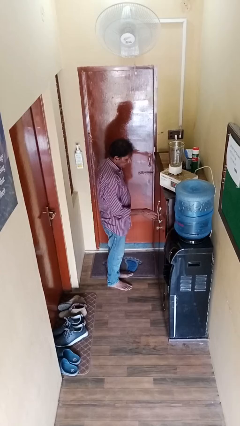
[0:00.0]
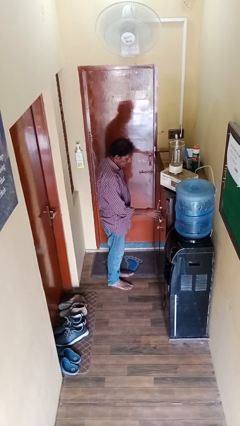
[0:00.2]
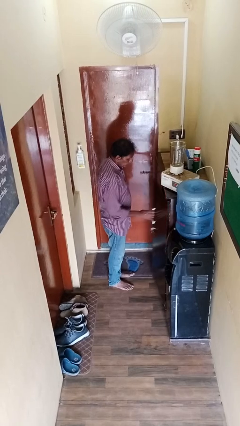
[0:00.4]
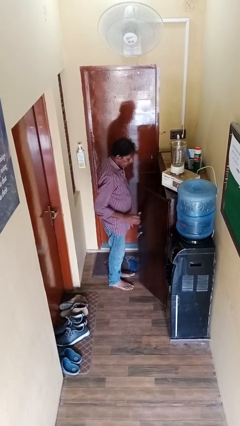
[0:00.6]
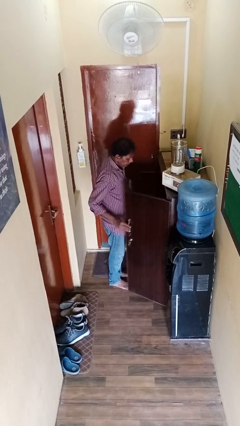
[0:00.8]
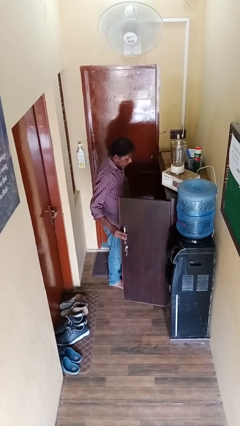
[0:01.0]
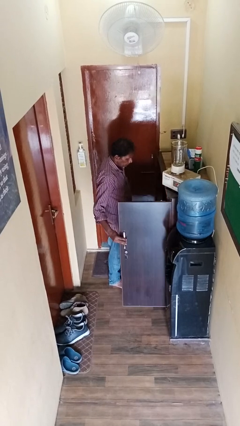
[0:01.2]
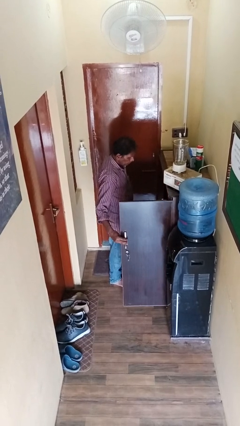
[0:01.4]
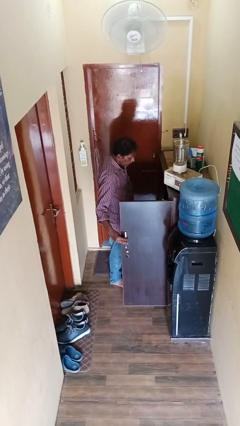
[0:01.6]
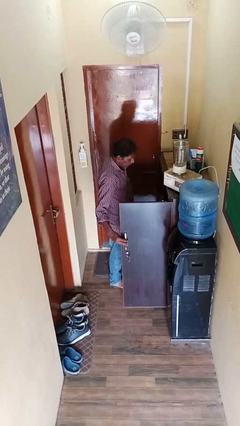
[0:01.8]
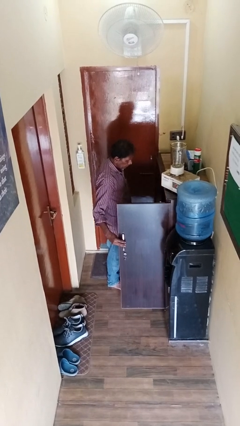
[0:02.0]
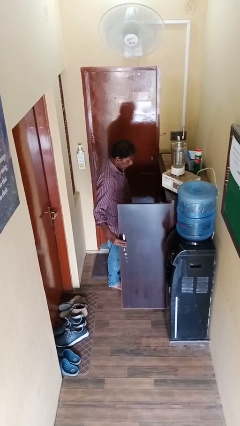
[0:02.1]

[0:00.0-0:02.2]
person opens cabinet

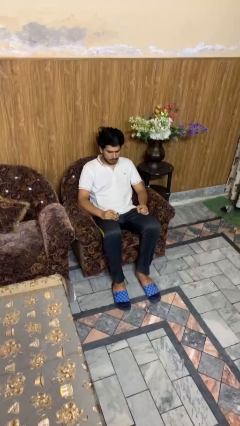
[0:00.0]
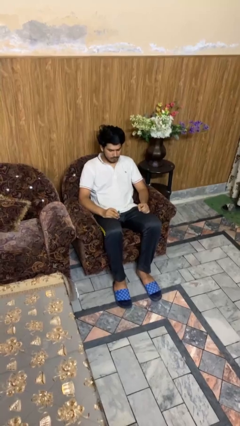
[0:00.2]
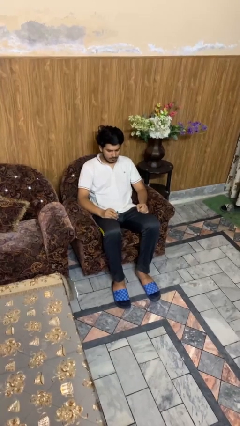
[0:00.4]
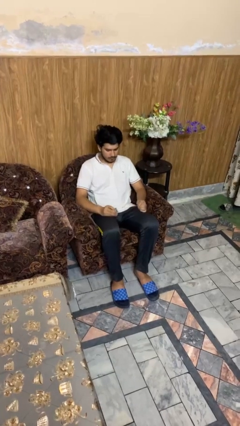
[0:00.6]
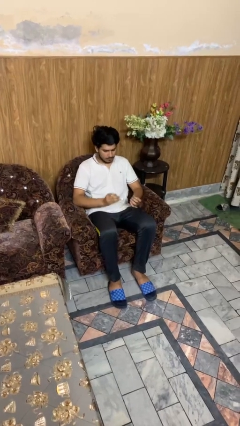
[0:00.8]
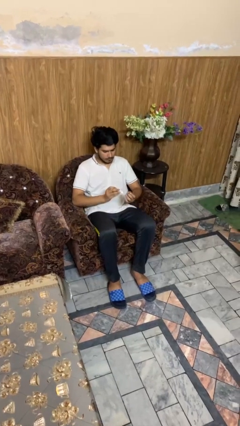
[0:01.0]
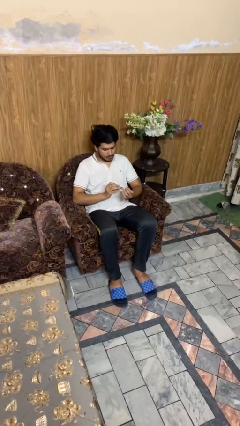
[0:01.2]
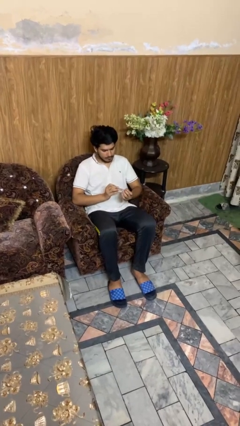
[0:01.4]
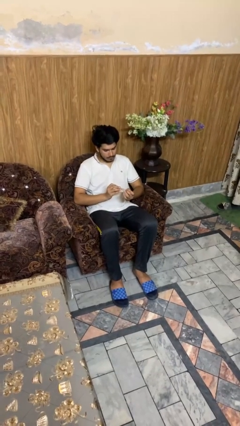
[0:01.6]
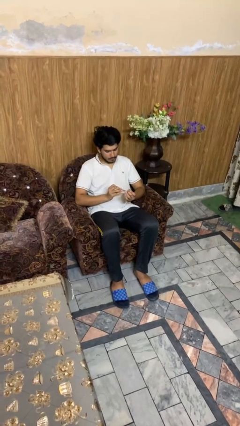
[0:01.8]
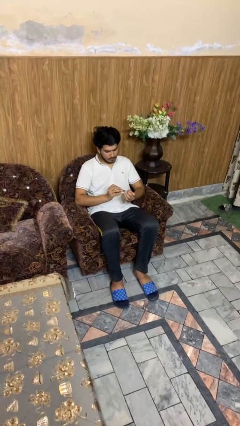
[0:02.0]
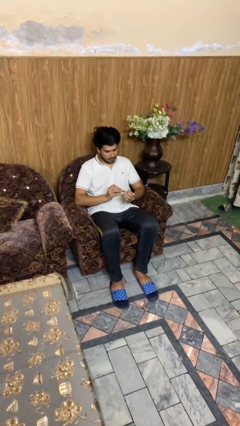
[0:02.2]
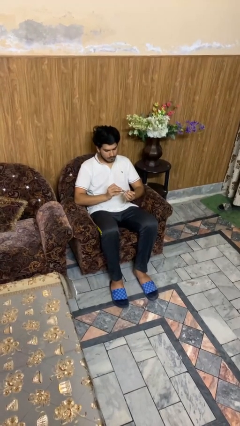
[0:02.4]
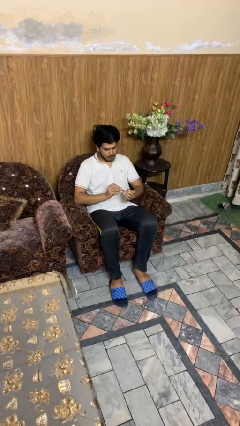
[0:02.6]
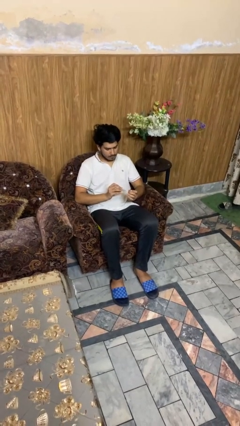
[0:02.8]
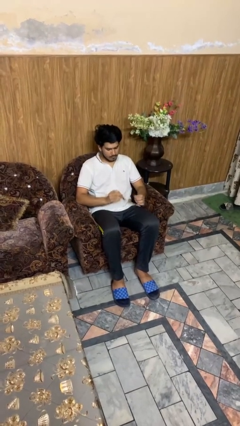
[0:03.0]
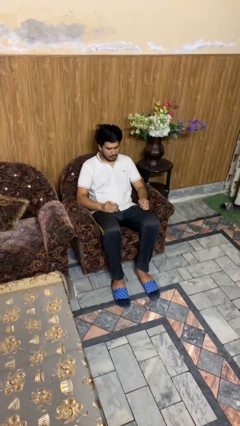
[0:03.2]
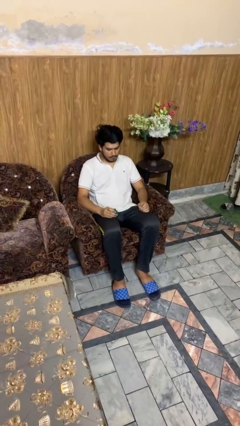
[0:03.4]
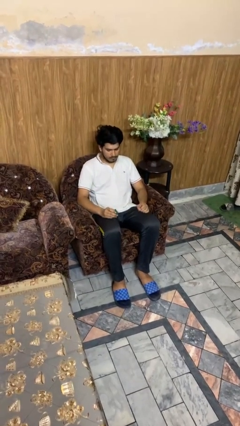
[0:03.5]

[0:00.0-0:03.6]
person clips fingernails

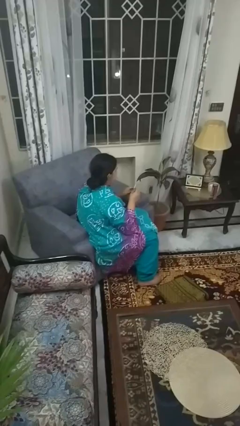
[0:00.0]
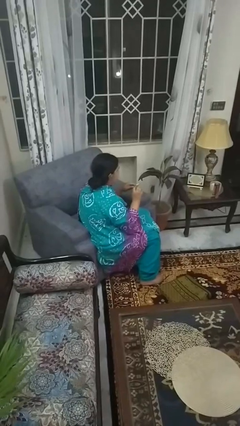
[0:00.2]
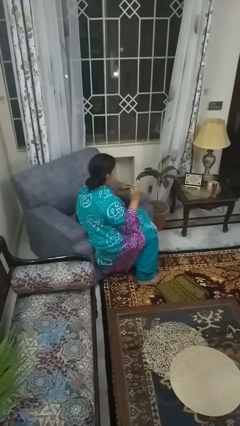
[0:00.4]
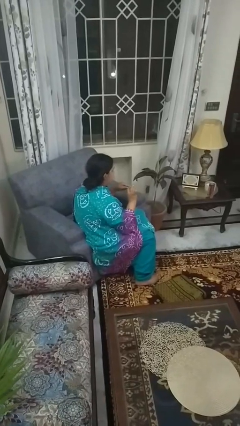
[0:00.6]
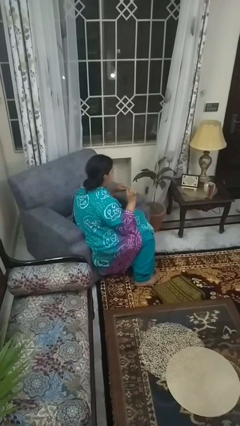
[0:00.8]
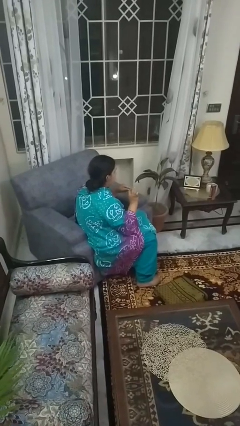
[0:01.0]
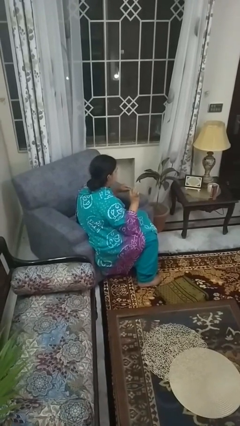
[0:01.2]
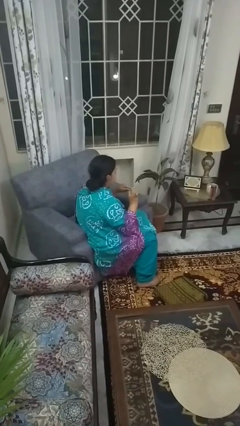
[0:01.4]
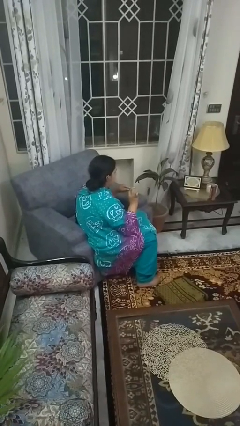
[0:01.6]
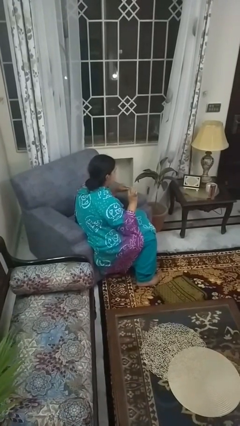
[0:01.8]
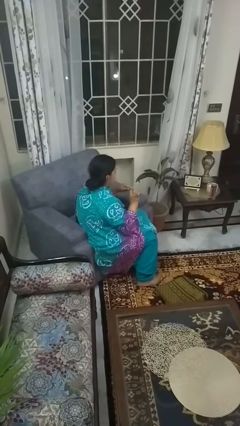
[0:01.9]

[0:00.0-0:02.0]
person files fingernails

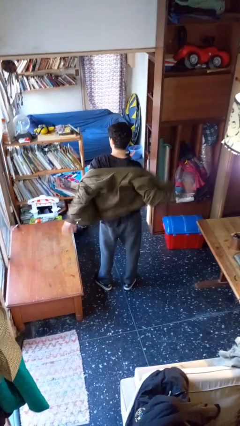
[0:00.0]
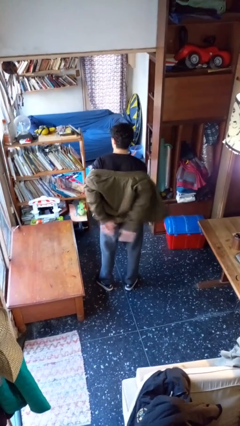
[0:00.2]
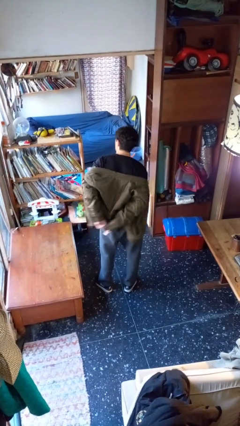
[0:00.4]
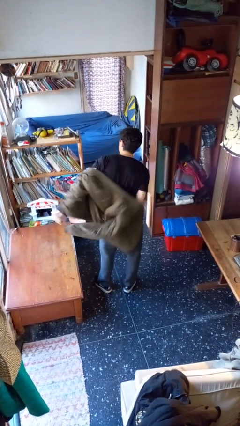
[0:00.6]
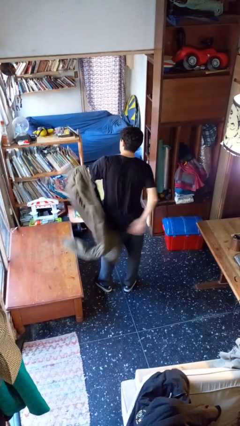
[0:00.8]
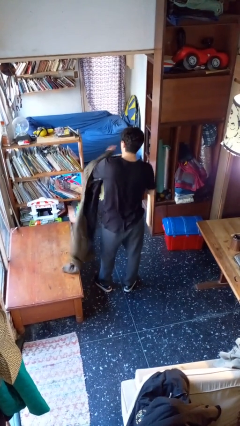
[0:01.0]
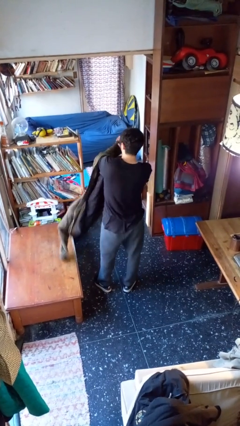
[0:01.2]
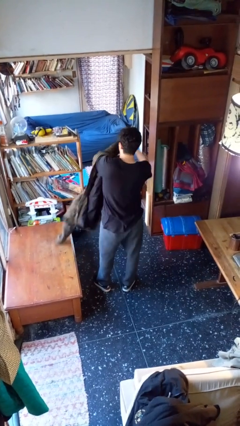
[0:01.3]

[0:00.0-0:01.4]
person takes off jacket

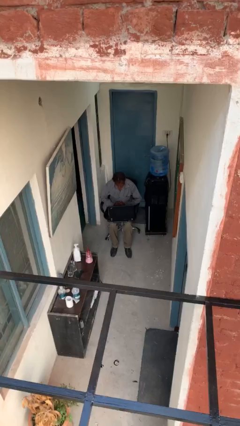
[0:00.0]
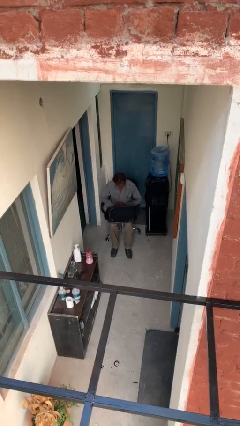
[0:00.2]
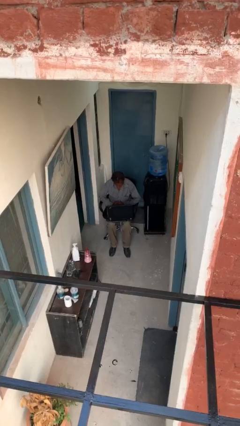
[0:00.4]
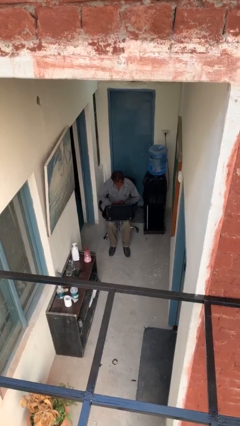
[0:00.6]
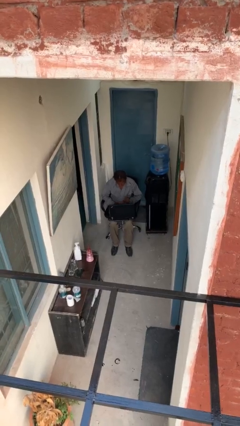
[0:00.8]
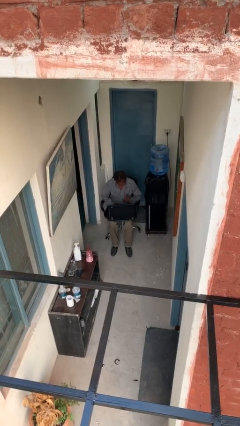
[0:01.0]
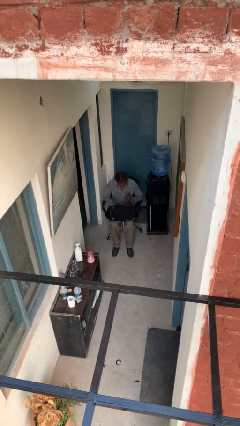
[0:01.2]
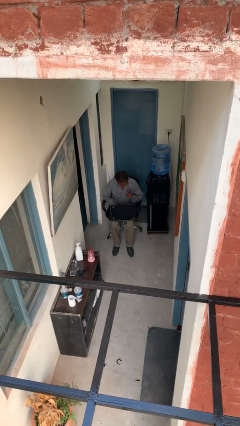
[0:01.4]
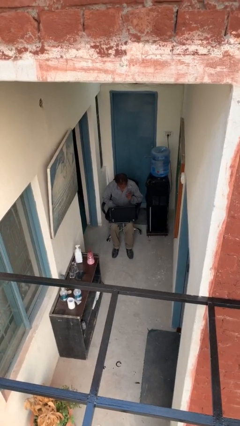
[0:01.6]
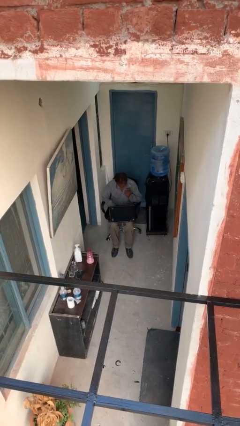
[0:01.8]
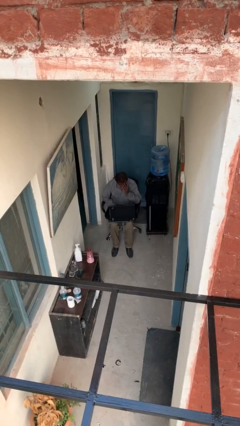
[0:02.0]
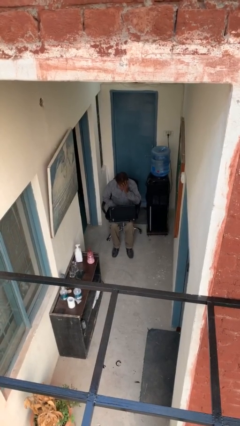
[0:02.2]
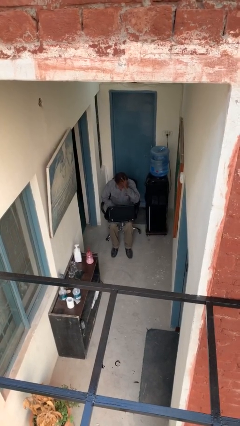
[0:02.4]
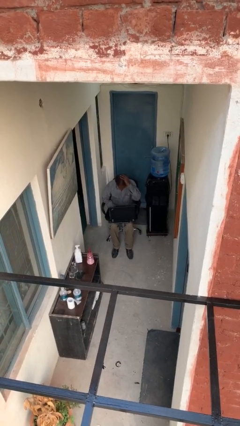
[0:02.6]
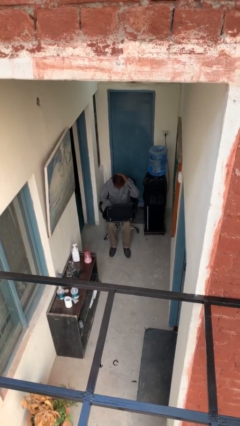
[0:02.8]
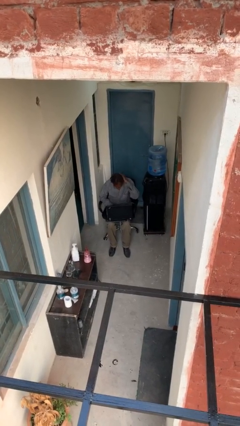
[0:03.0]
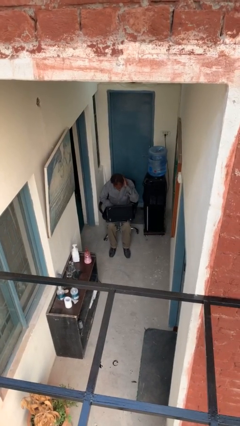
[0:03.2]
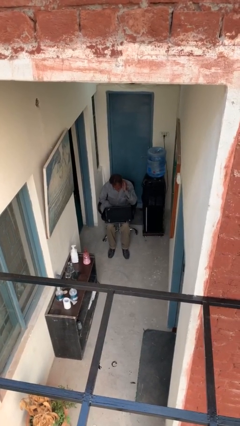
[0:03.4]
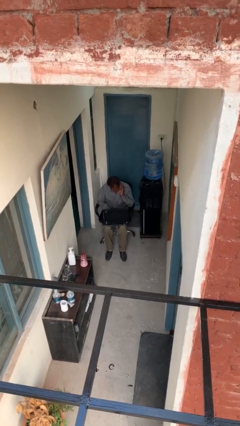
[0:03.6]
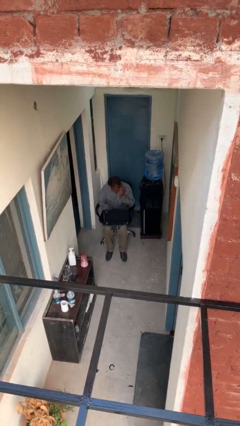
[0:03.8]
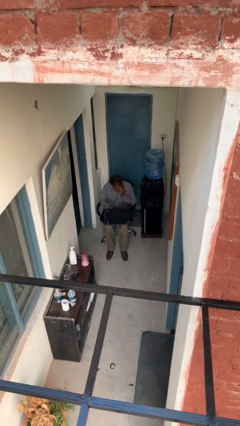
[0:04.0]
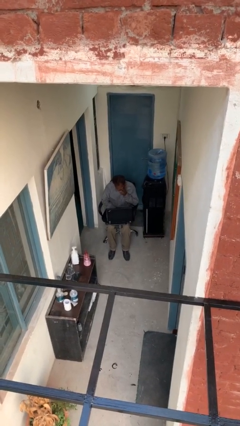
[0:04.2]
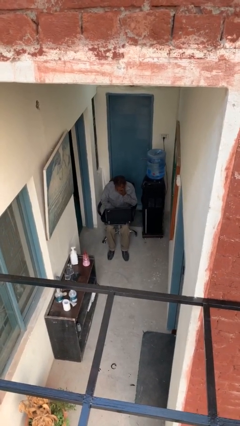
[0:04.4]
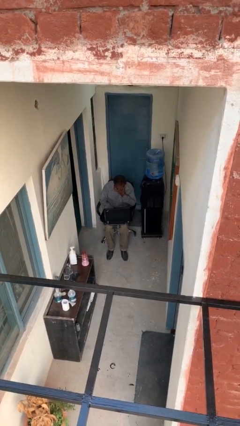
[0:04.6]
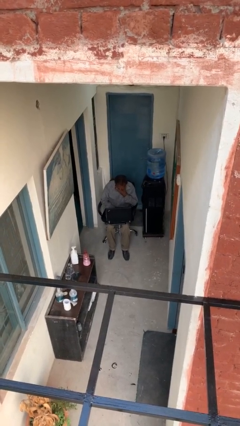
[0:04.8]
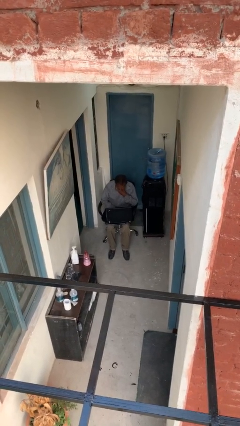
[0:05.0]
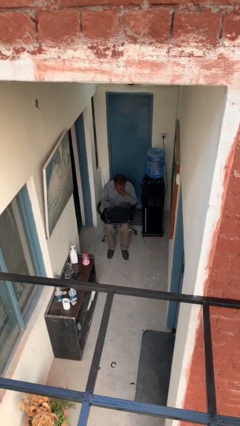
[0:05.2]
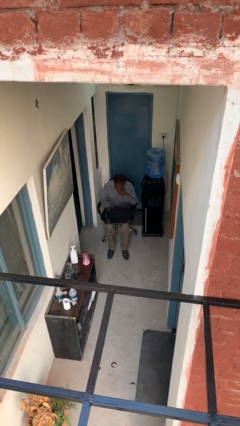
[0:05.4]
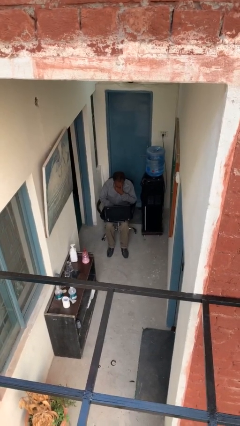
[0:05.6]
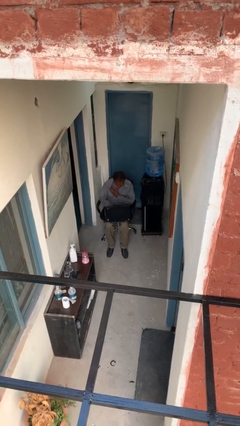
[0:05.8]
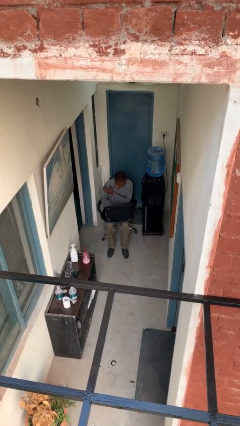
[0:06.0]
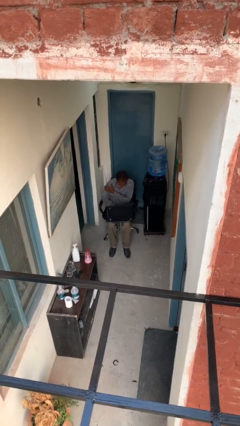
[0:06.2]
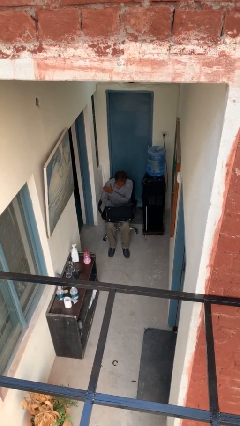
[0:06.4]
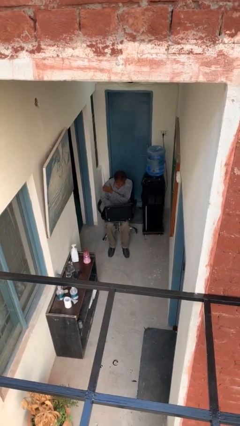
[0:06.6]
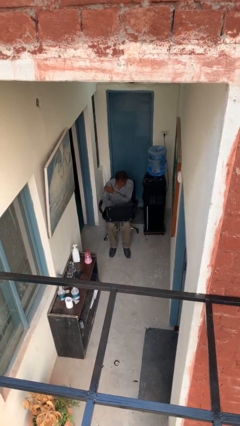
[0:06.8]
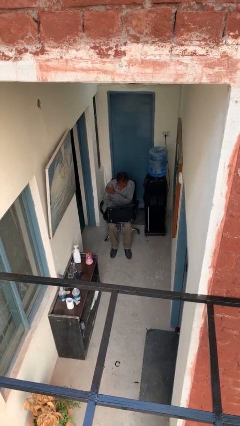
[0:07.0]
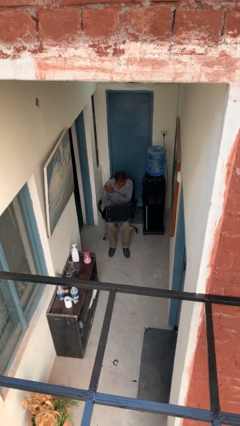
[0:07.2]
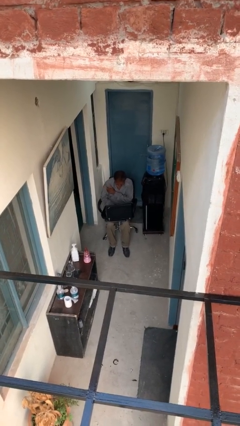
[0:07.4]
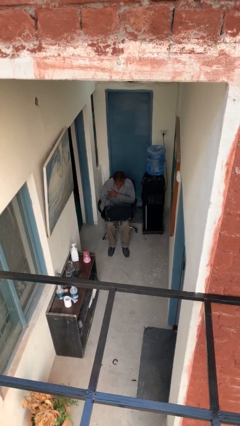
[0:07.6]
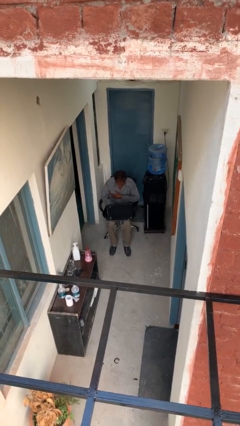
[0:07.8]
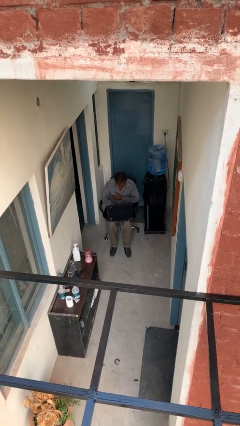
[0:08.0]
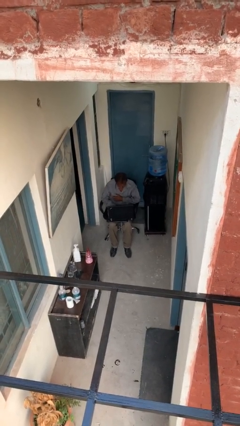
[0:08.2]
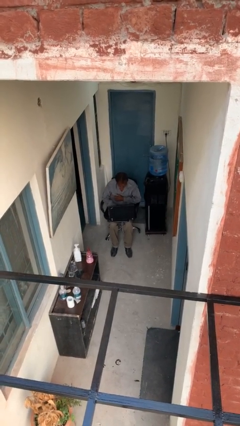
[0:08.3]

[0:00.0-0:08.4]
person interacts with laptop
